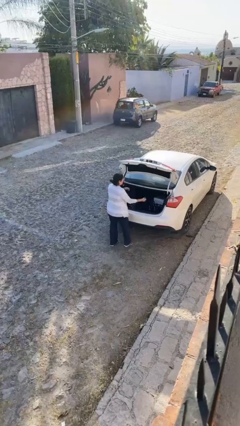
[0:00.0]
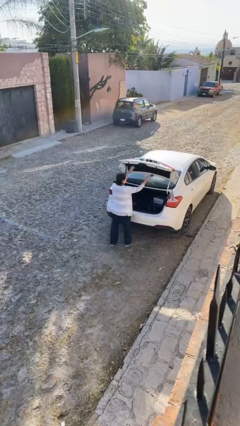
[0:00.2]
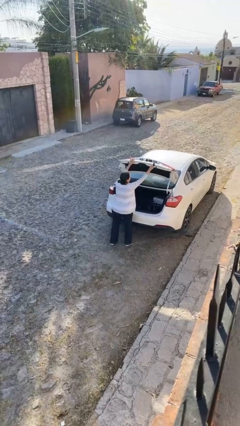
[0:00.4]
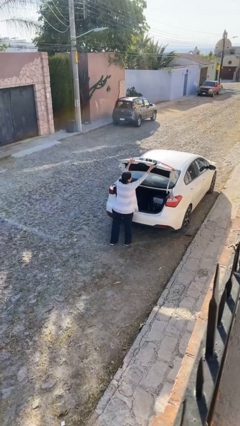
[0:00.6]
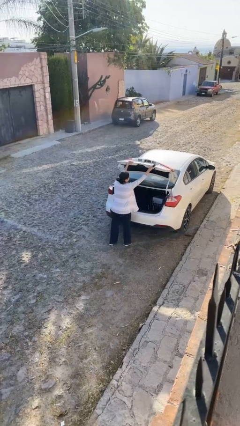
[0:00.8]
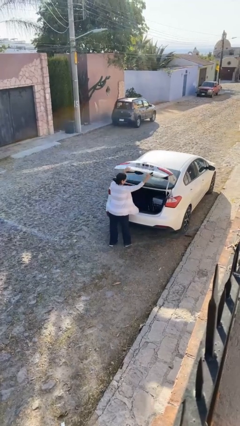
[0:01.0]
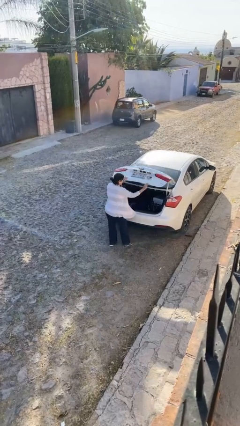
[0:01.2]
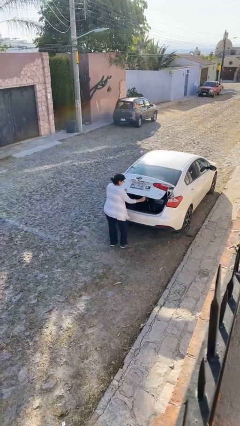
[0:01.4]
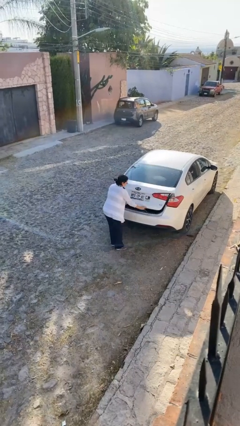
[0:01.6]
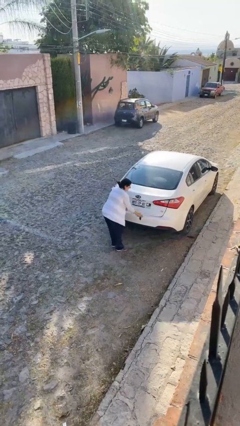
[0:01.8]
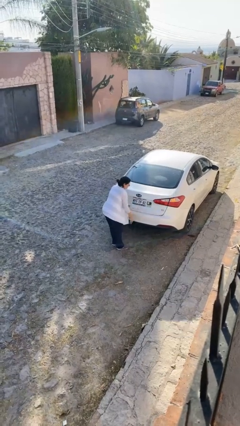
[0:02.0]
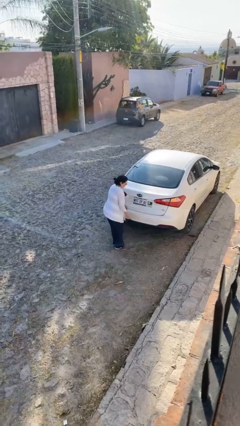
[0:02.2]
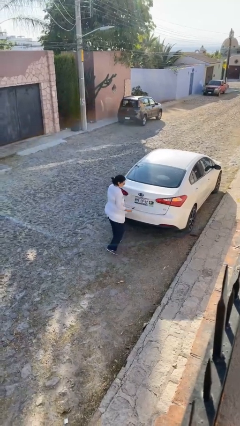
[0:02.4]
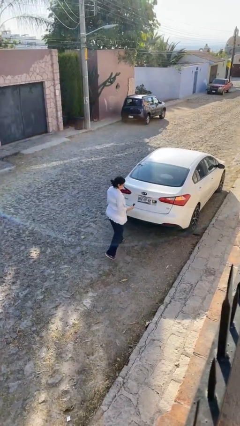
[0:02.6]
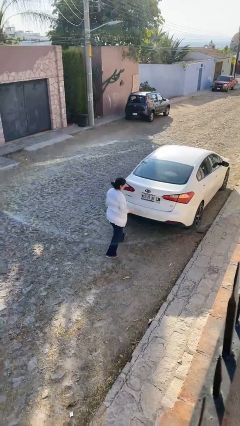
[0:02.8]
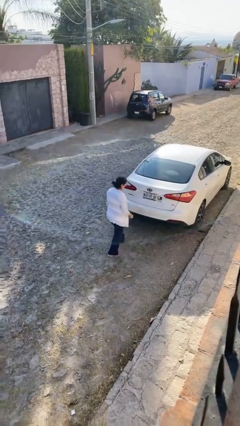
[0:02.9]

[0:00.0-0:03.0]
person closes car trunk

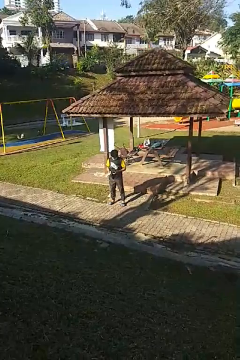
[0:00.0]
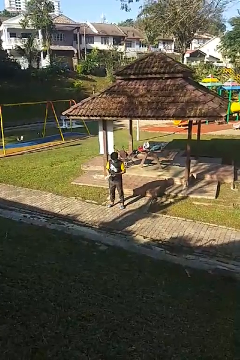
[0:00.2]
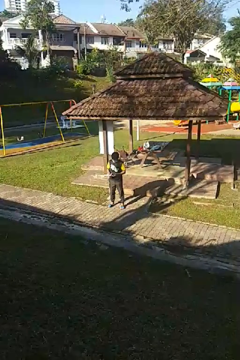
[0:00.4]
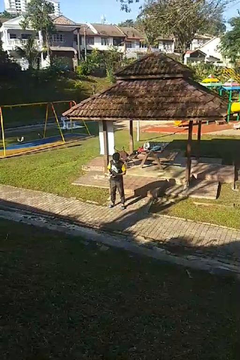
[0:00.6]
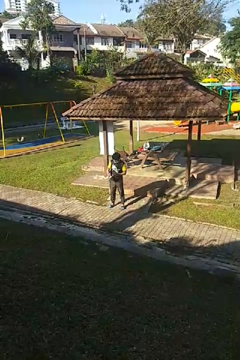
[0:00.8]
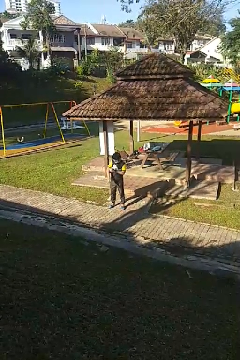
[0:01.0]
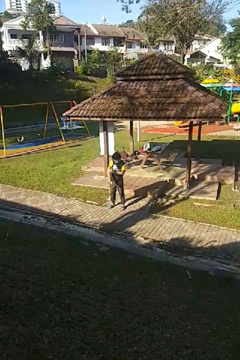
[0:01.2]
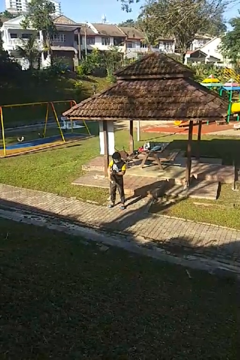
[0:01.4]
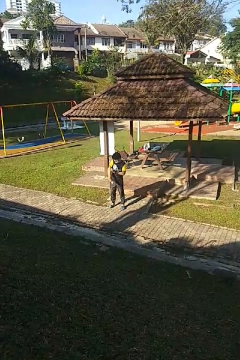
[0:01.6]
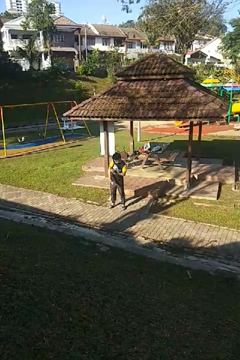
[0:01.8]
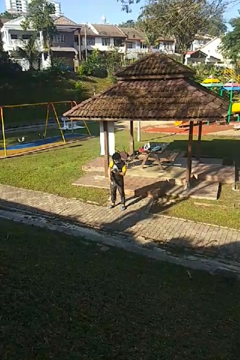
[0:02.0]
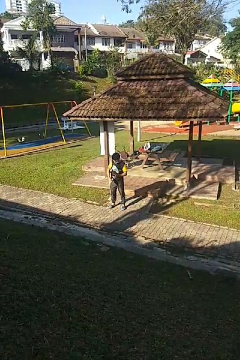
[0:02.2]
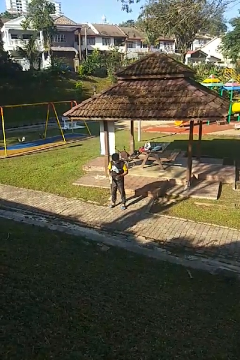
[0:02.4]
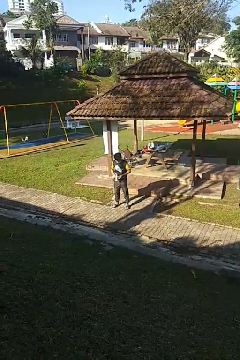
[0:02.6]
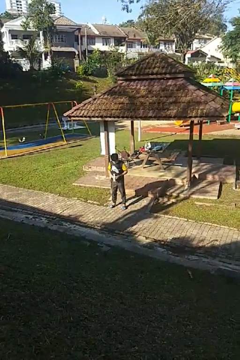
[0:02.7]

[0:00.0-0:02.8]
person applies sunscreen

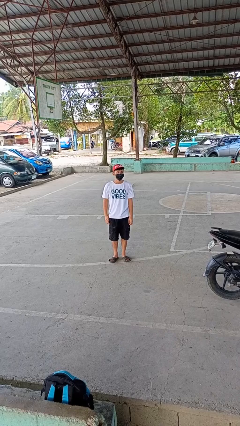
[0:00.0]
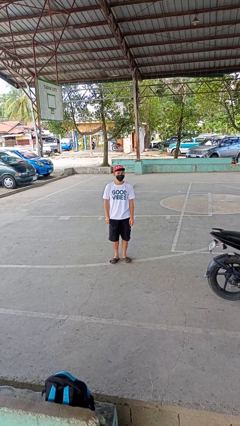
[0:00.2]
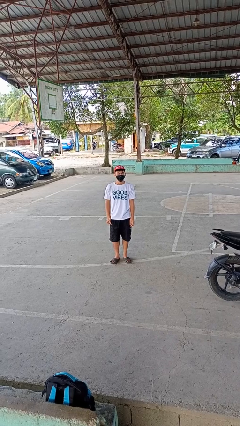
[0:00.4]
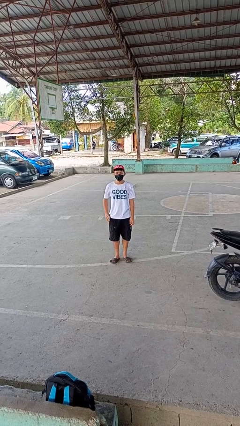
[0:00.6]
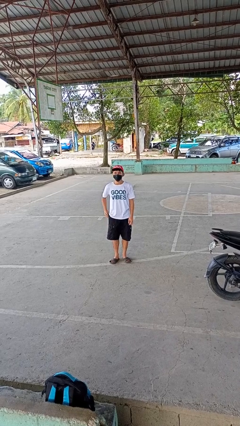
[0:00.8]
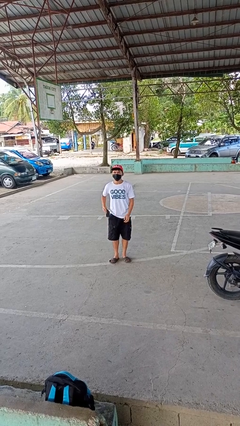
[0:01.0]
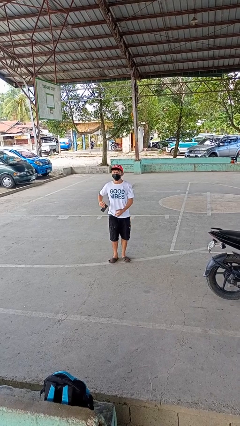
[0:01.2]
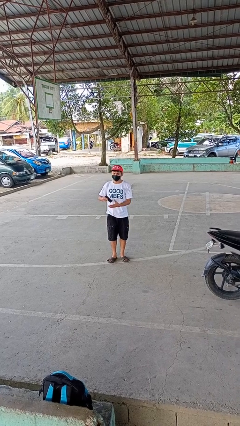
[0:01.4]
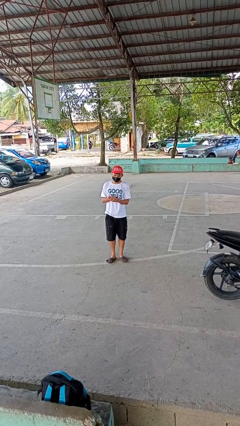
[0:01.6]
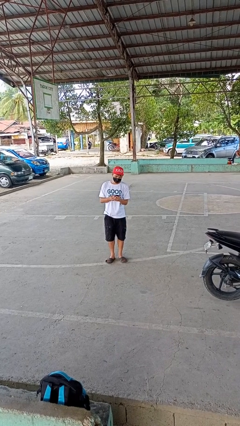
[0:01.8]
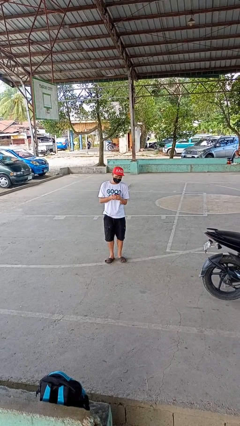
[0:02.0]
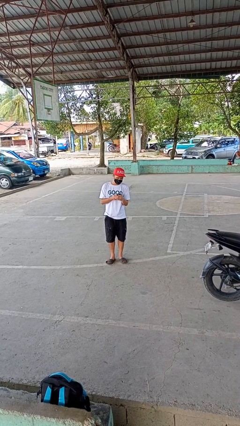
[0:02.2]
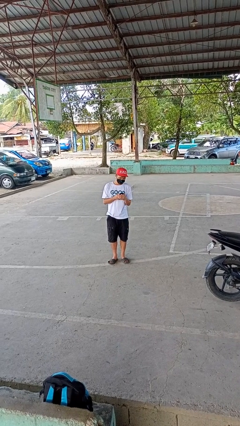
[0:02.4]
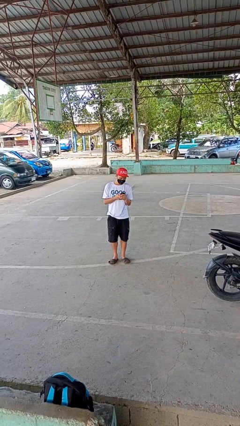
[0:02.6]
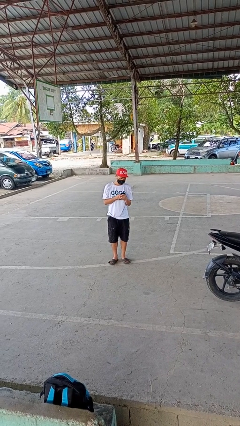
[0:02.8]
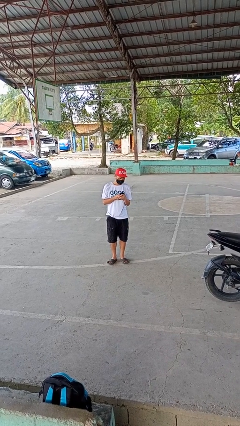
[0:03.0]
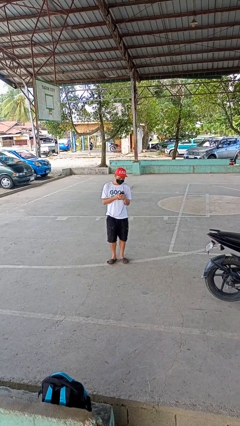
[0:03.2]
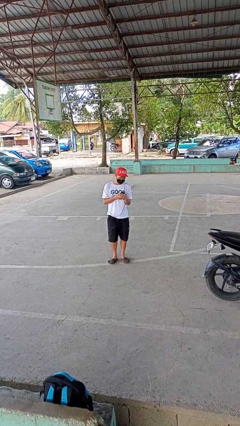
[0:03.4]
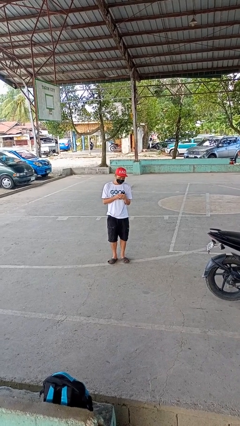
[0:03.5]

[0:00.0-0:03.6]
person takes phone from pocket

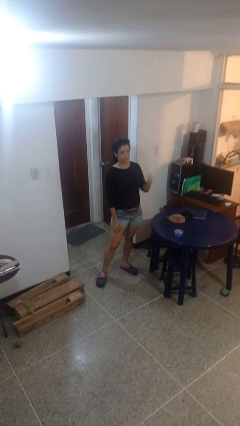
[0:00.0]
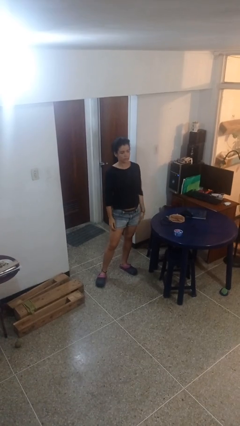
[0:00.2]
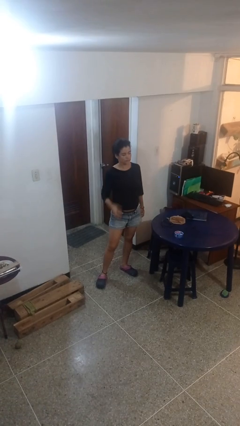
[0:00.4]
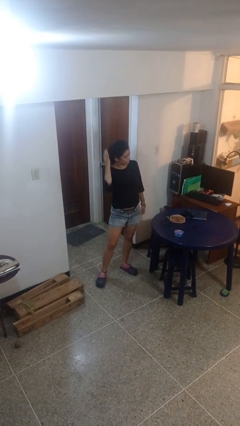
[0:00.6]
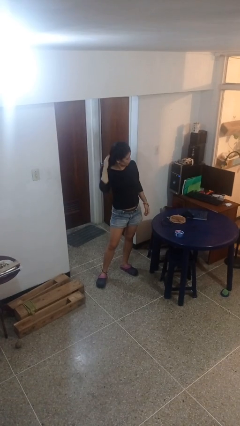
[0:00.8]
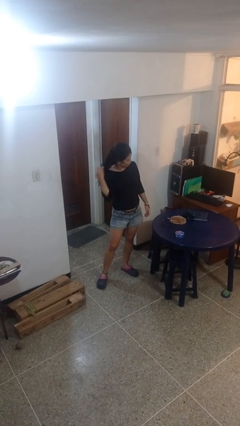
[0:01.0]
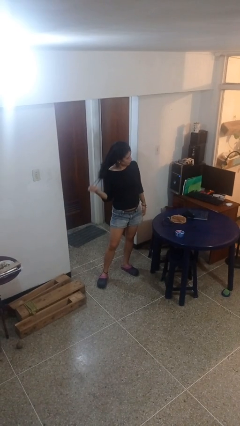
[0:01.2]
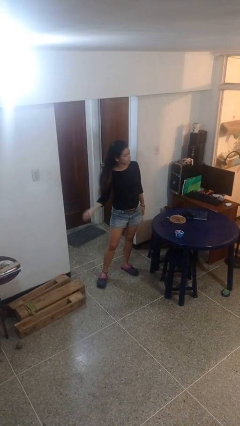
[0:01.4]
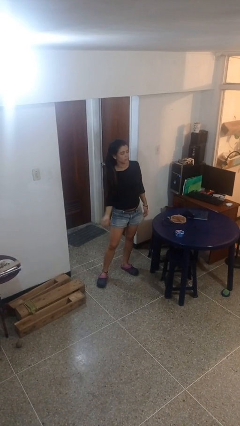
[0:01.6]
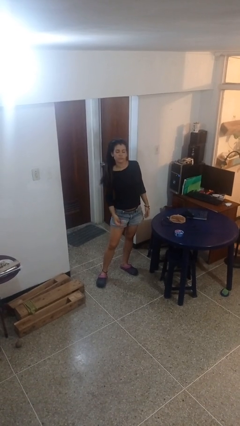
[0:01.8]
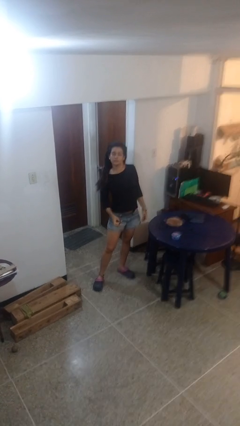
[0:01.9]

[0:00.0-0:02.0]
person takes off hairtie

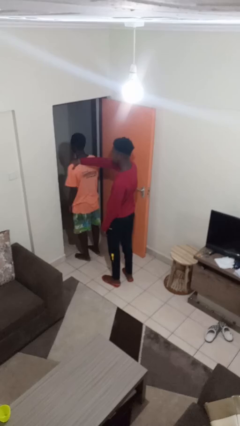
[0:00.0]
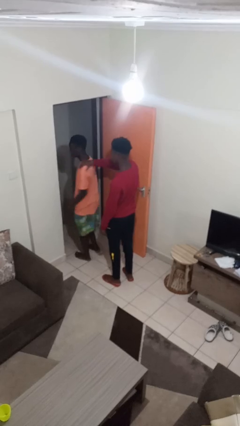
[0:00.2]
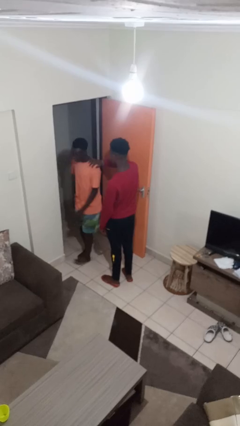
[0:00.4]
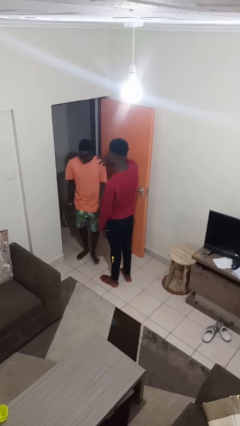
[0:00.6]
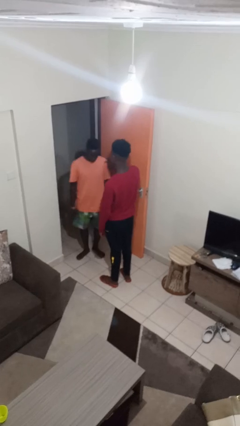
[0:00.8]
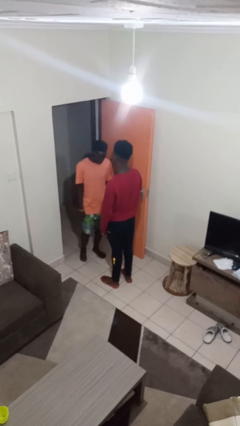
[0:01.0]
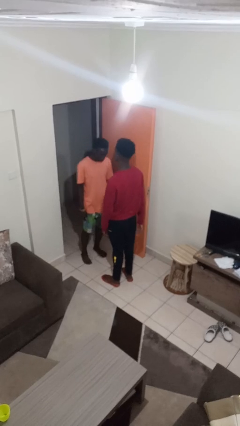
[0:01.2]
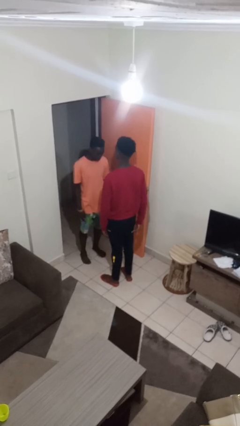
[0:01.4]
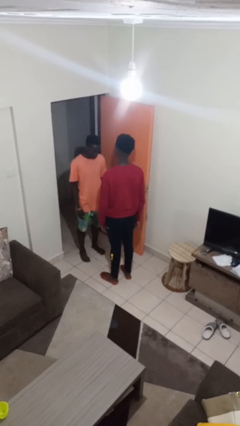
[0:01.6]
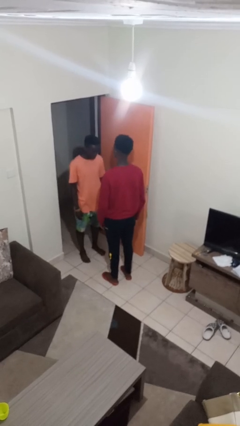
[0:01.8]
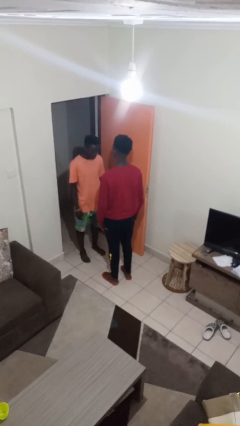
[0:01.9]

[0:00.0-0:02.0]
person spins person around

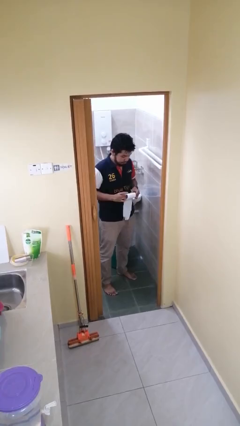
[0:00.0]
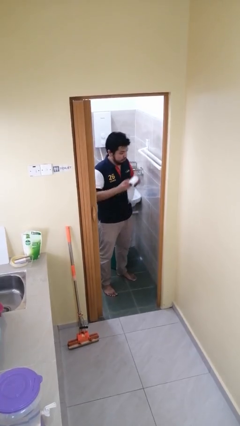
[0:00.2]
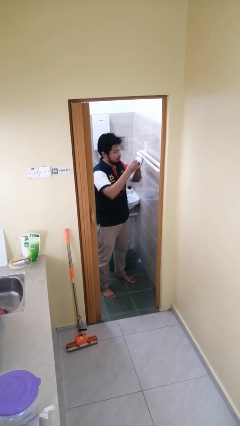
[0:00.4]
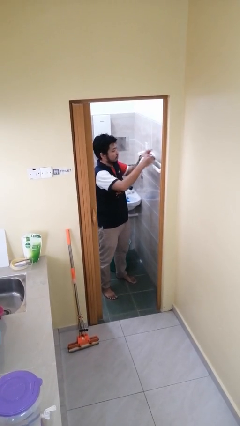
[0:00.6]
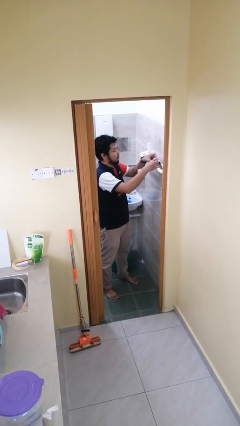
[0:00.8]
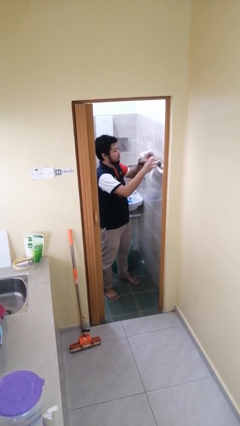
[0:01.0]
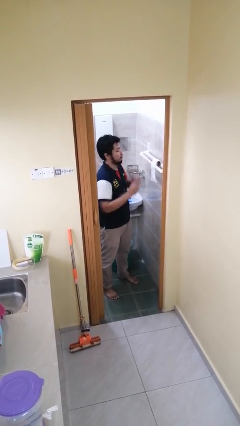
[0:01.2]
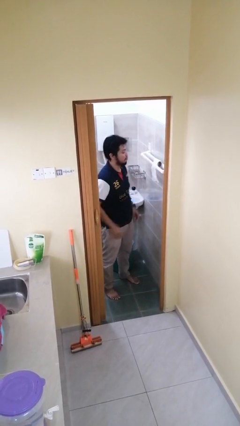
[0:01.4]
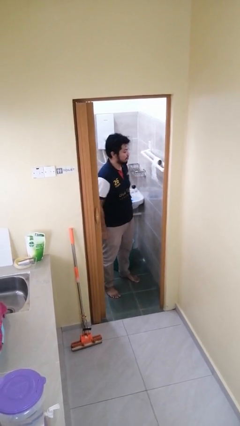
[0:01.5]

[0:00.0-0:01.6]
person puts down object on countertop

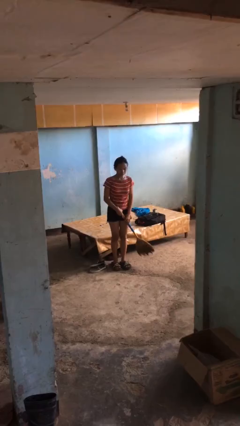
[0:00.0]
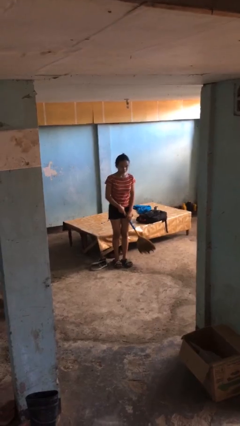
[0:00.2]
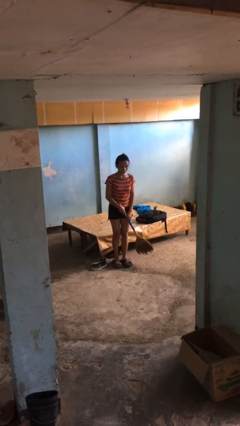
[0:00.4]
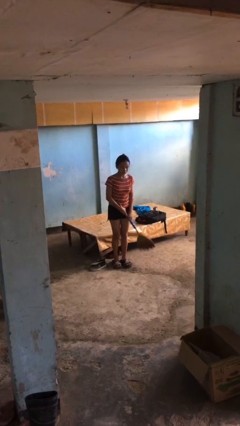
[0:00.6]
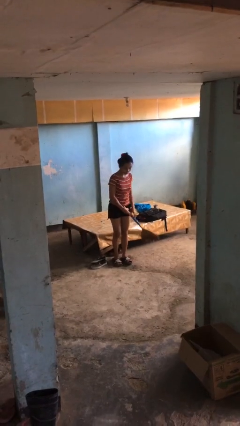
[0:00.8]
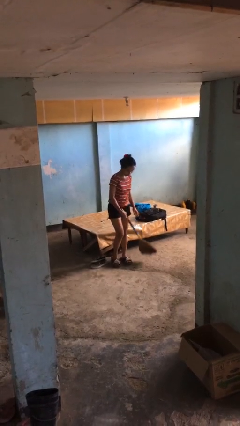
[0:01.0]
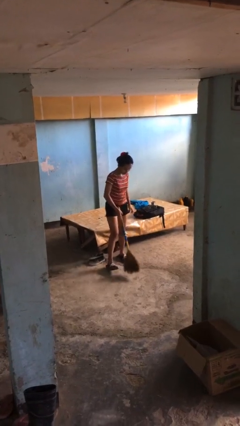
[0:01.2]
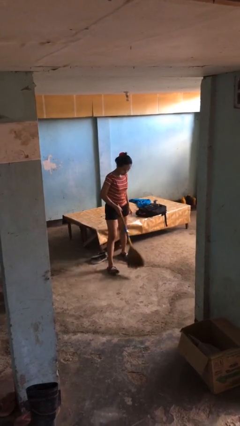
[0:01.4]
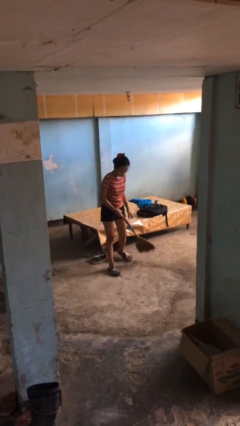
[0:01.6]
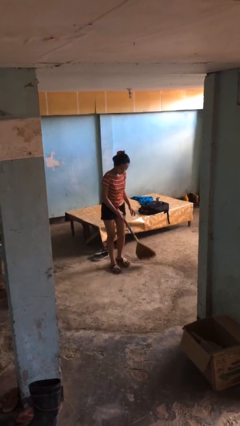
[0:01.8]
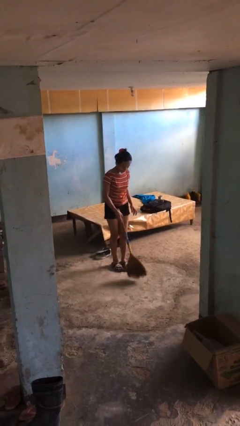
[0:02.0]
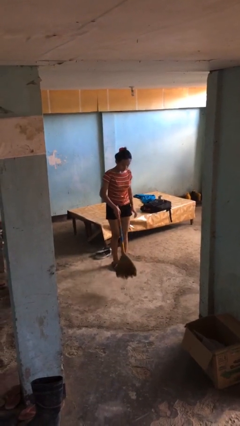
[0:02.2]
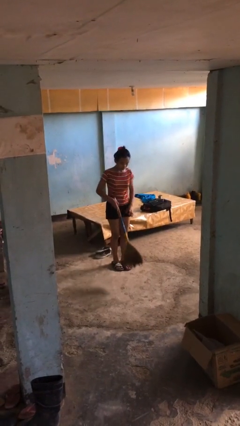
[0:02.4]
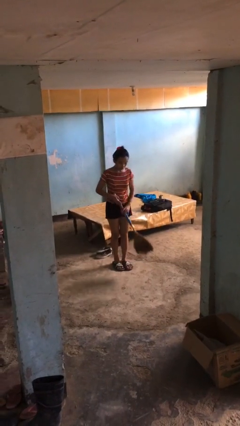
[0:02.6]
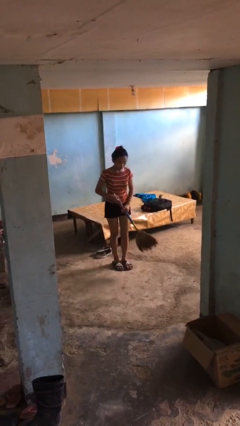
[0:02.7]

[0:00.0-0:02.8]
person sweeps floor
